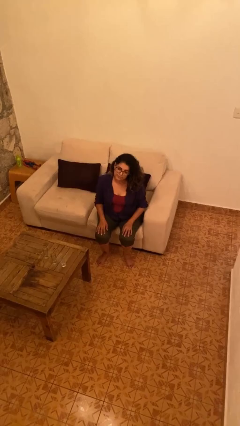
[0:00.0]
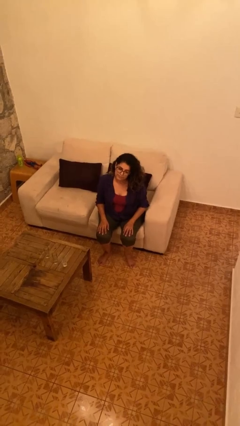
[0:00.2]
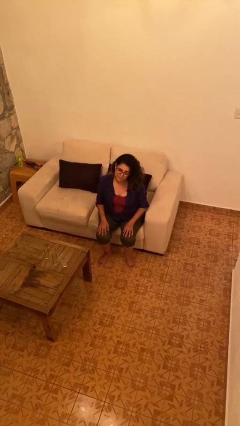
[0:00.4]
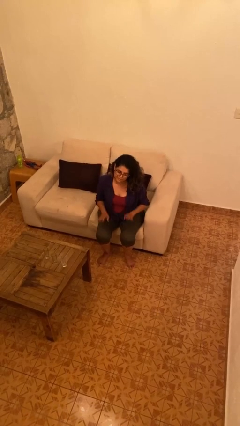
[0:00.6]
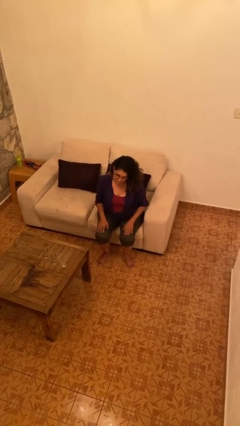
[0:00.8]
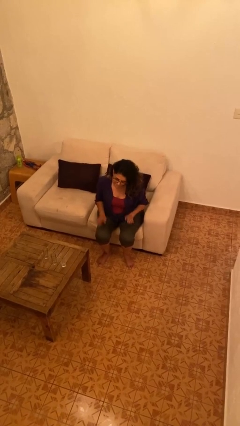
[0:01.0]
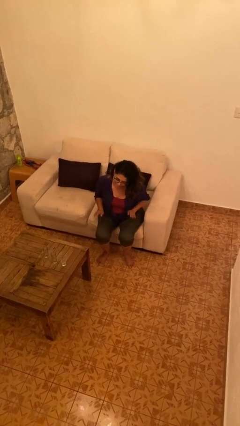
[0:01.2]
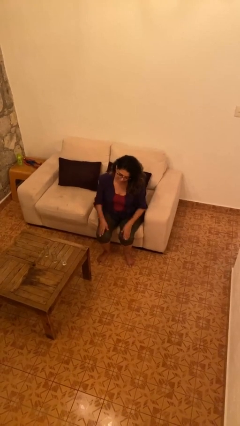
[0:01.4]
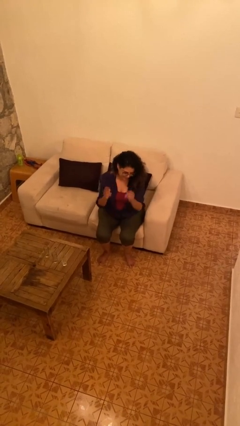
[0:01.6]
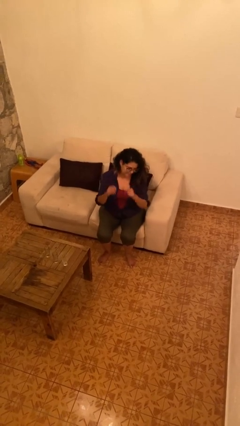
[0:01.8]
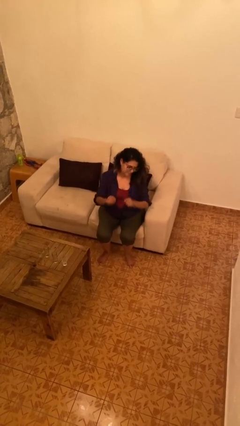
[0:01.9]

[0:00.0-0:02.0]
person slaps hands on thighs

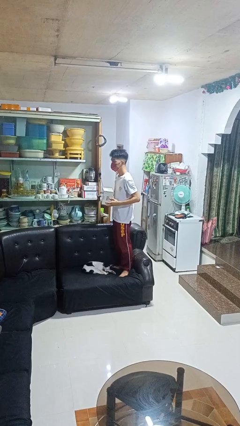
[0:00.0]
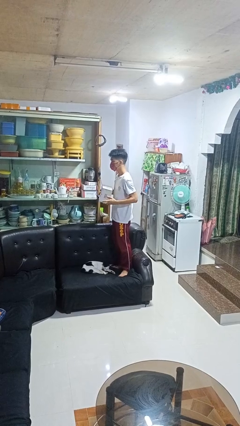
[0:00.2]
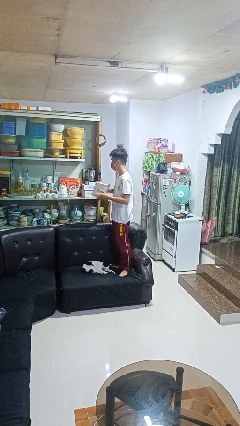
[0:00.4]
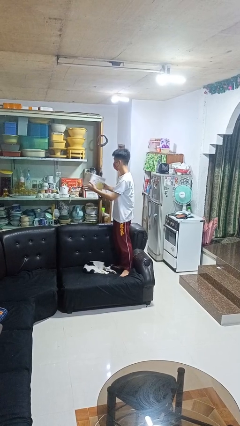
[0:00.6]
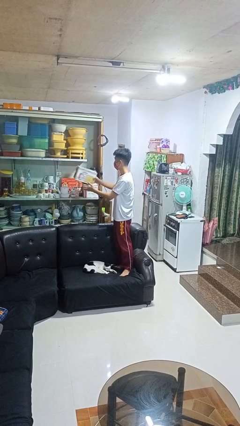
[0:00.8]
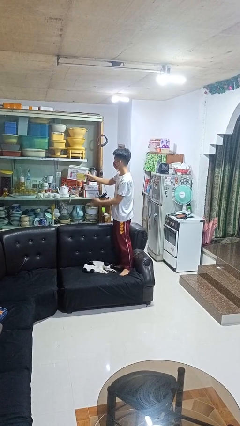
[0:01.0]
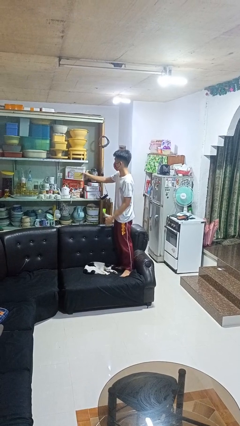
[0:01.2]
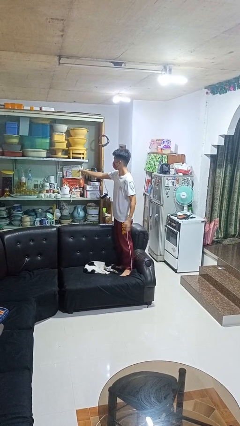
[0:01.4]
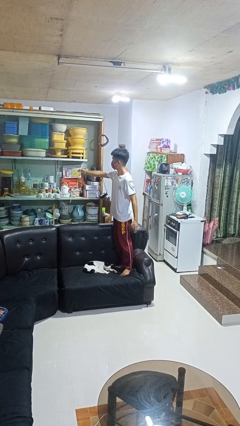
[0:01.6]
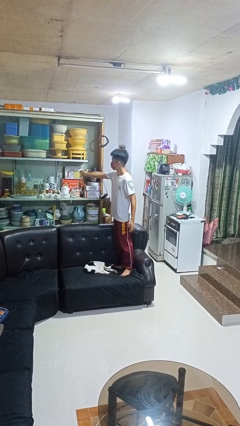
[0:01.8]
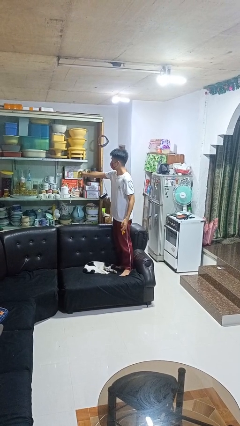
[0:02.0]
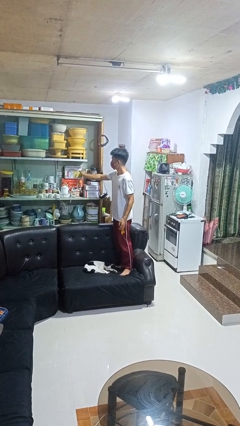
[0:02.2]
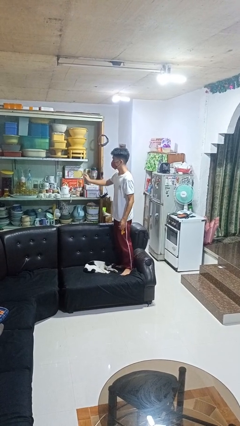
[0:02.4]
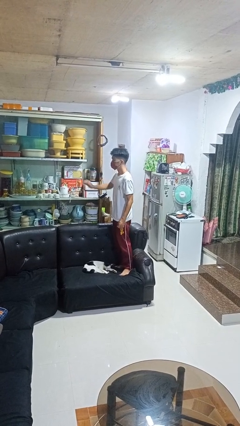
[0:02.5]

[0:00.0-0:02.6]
person puts down object into cabinet

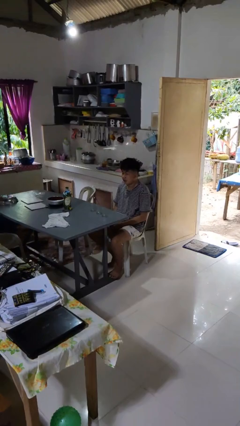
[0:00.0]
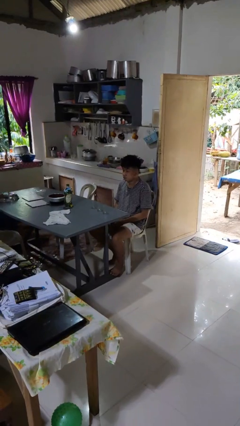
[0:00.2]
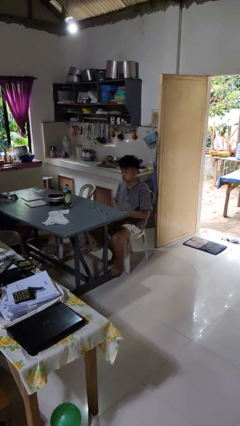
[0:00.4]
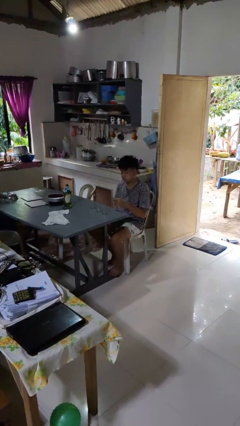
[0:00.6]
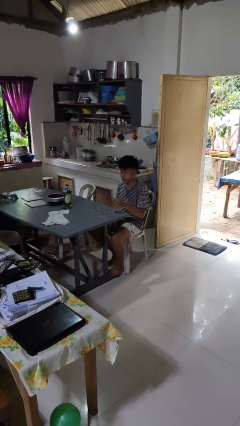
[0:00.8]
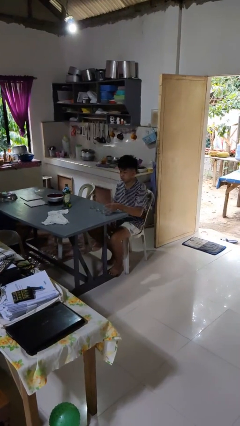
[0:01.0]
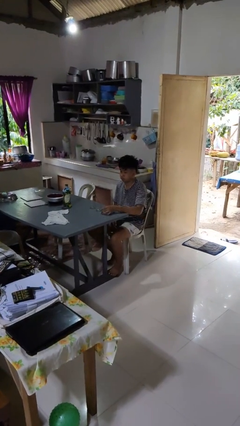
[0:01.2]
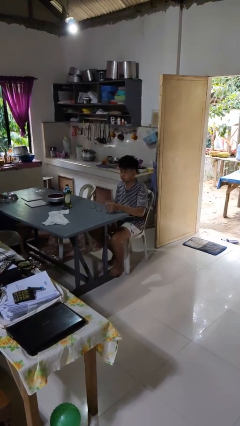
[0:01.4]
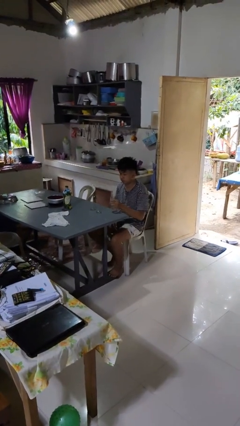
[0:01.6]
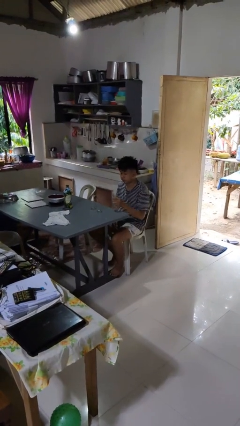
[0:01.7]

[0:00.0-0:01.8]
person picks up object from table

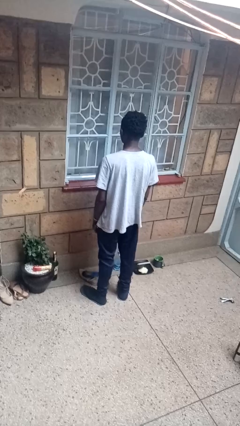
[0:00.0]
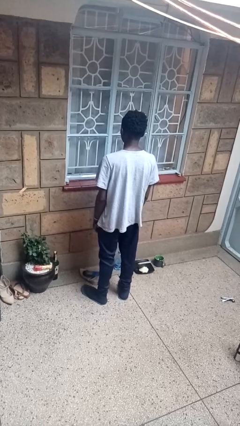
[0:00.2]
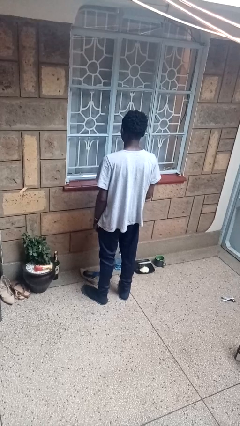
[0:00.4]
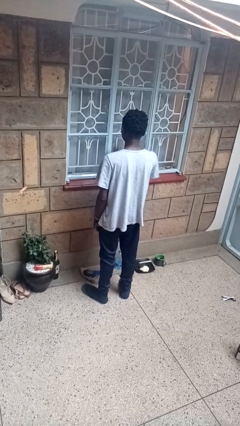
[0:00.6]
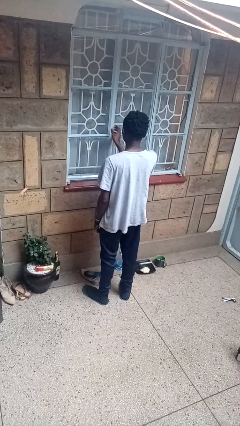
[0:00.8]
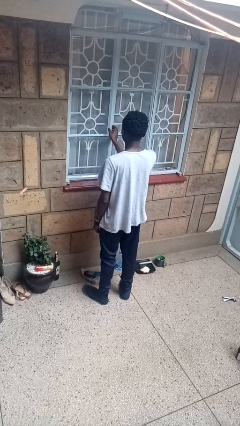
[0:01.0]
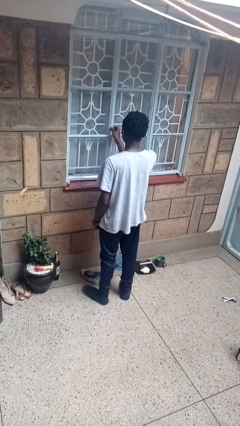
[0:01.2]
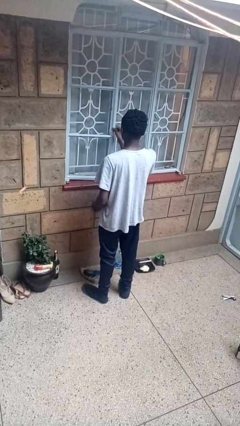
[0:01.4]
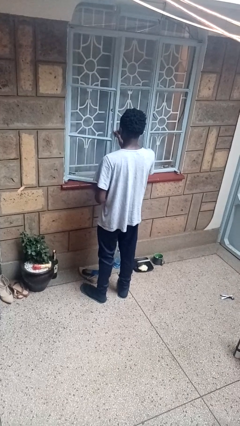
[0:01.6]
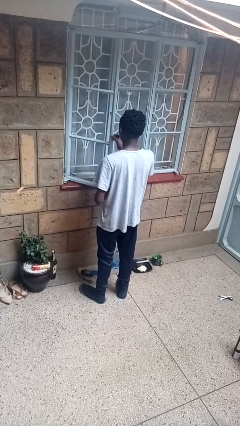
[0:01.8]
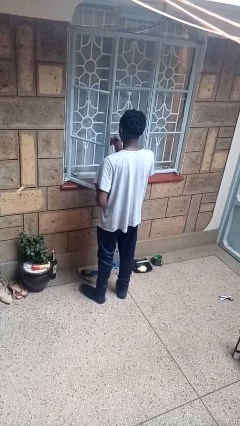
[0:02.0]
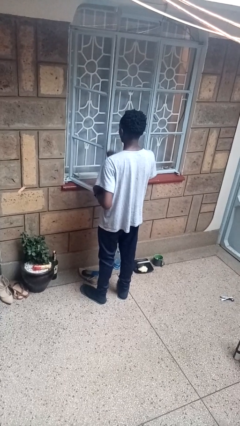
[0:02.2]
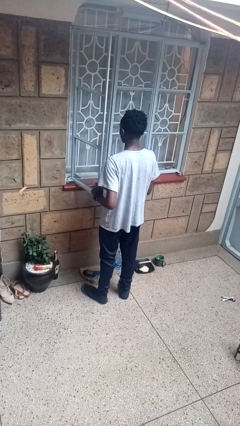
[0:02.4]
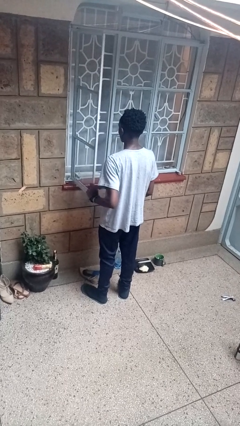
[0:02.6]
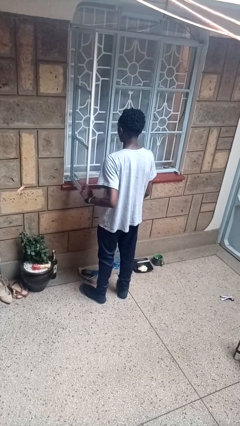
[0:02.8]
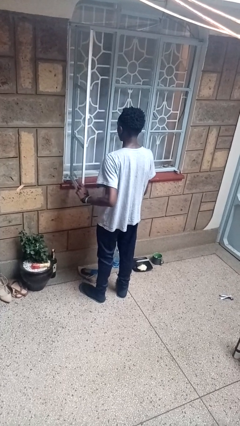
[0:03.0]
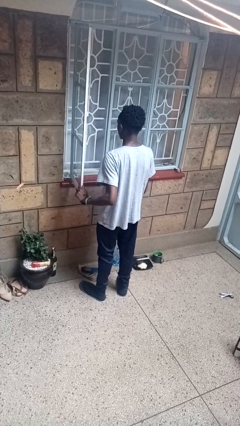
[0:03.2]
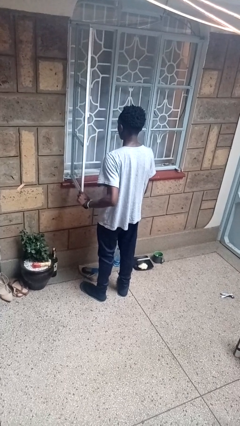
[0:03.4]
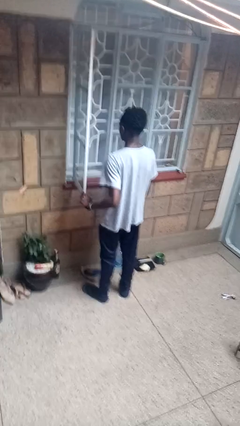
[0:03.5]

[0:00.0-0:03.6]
person opens home window

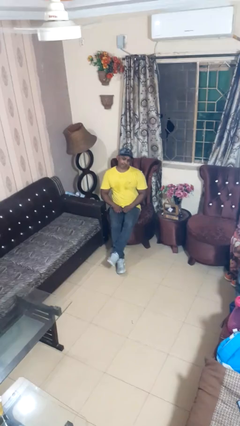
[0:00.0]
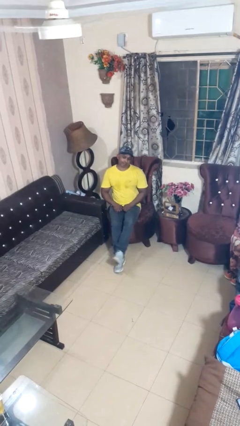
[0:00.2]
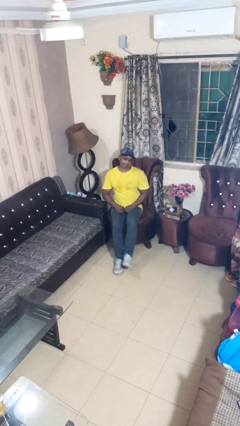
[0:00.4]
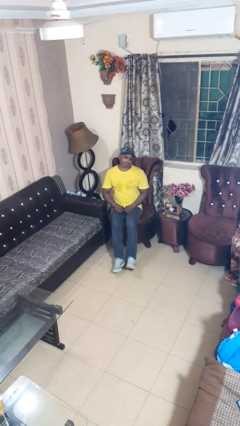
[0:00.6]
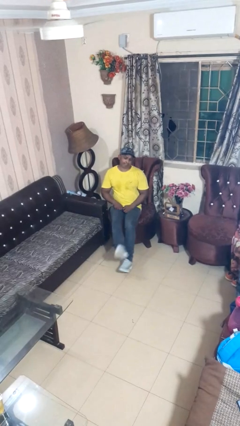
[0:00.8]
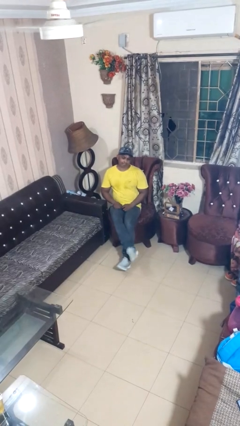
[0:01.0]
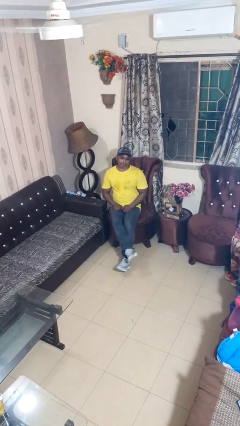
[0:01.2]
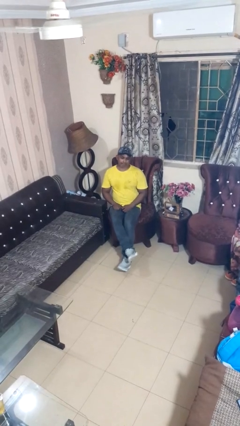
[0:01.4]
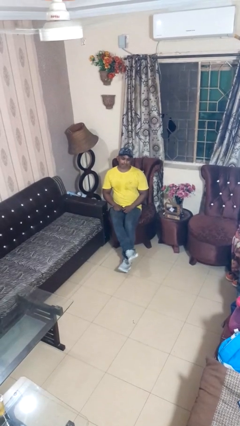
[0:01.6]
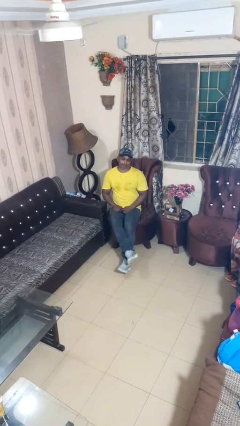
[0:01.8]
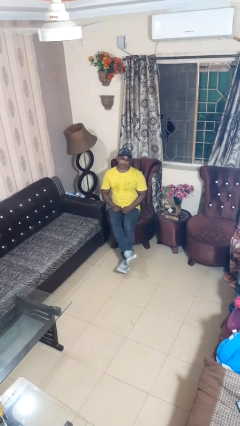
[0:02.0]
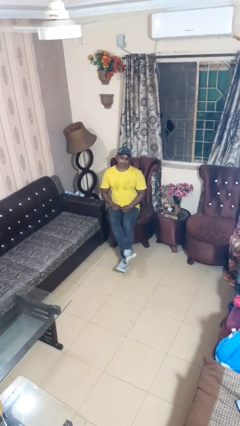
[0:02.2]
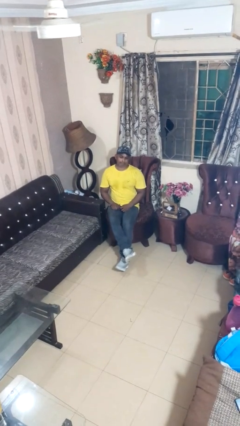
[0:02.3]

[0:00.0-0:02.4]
person crosses legs

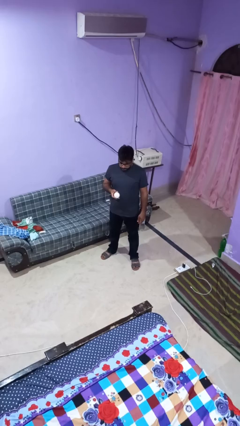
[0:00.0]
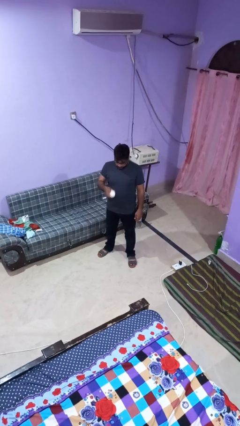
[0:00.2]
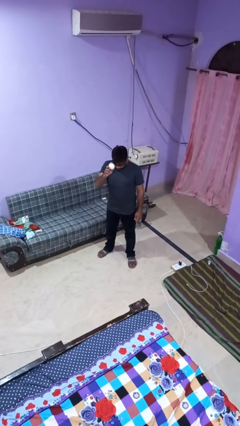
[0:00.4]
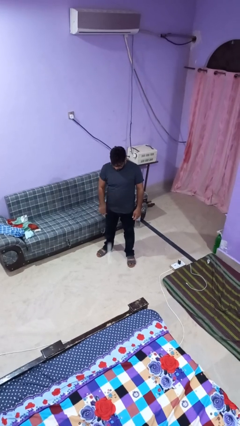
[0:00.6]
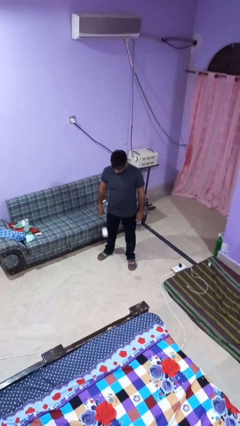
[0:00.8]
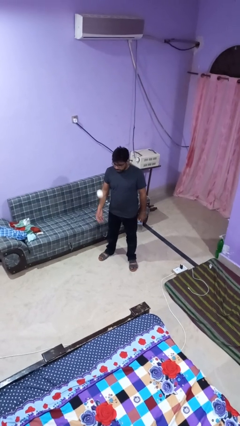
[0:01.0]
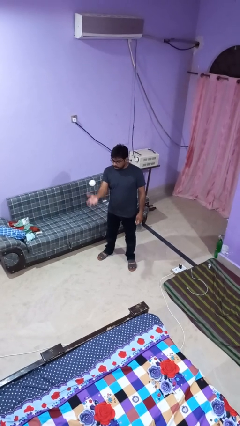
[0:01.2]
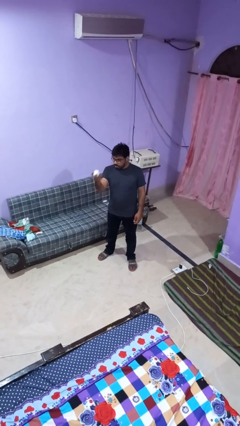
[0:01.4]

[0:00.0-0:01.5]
person bounces ball on floor

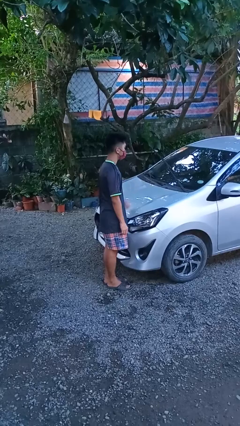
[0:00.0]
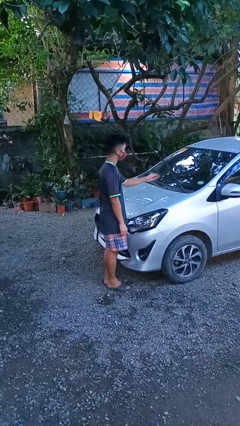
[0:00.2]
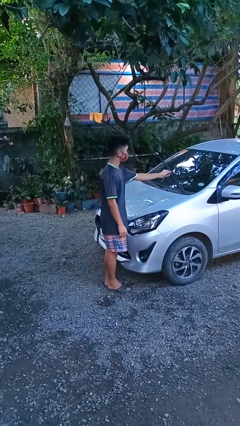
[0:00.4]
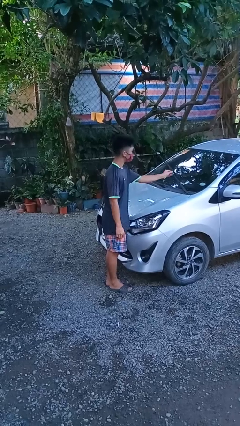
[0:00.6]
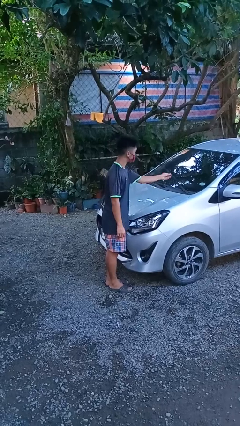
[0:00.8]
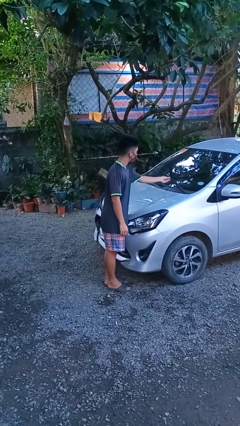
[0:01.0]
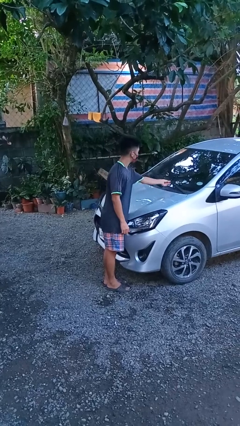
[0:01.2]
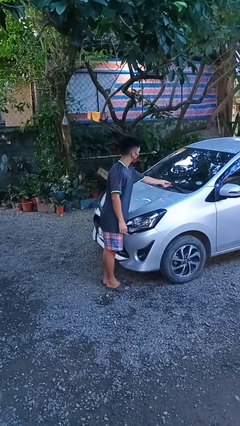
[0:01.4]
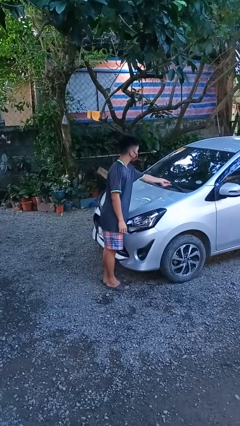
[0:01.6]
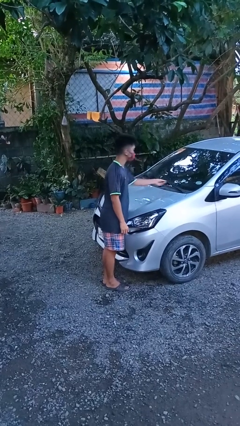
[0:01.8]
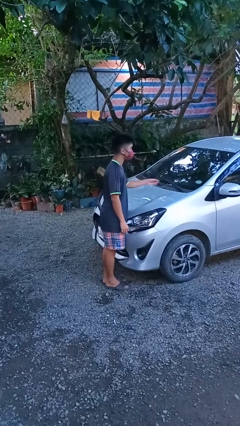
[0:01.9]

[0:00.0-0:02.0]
person flips down car wipers

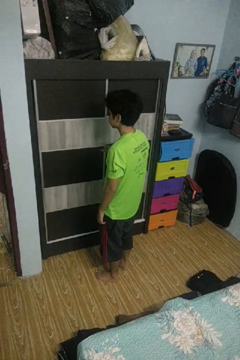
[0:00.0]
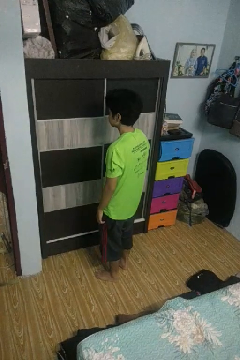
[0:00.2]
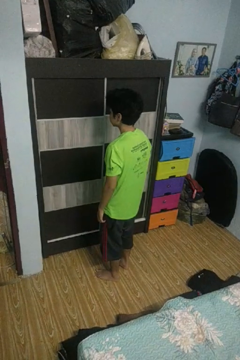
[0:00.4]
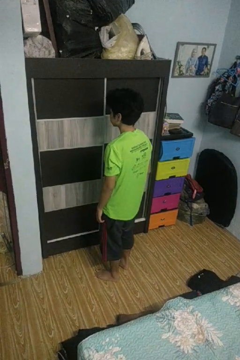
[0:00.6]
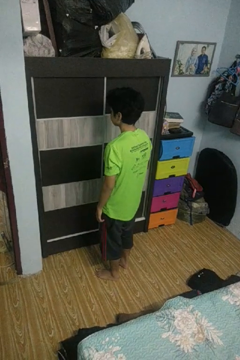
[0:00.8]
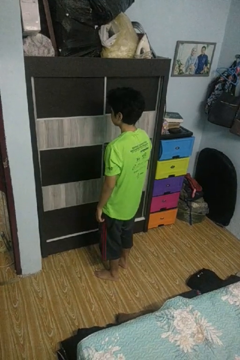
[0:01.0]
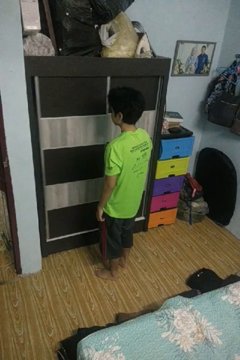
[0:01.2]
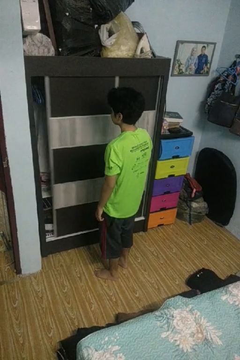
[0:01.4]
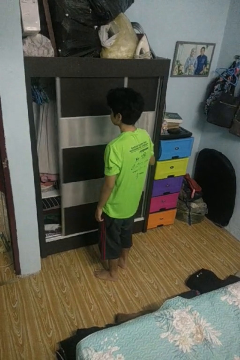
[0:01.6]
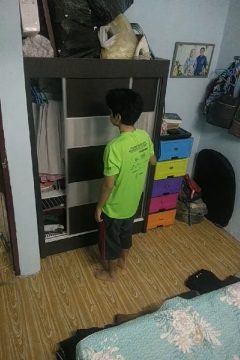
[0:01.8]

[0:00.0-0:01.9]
person opens closet door
